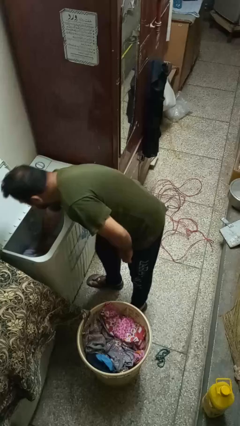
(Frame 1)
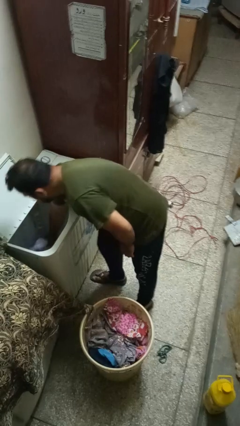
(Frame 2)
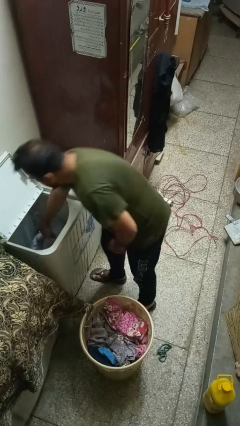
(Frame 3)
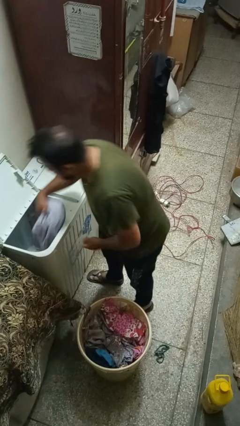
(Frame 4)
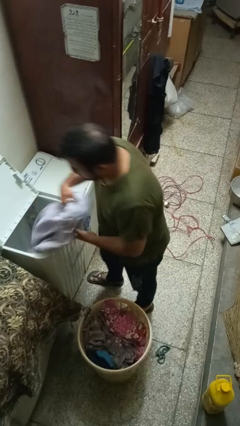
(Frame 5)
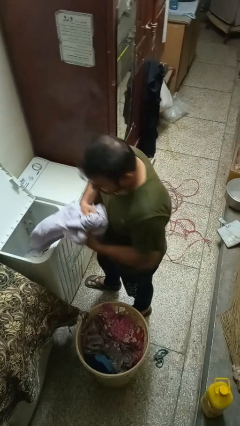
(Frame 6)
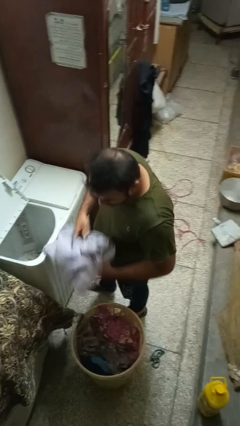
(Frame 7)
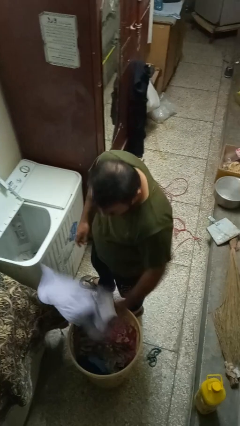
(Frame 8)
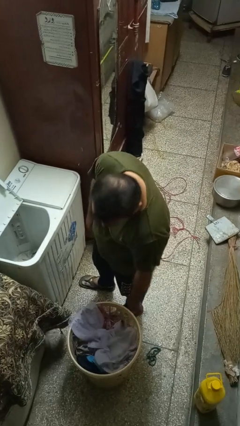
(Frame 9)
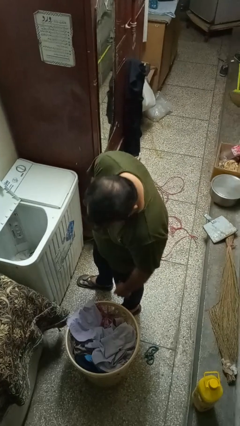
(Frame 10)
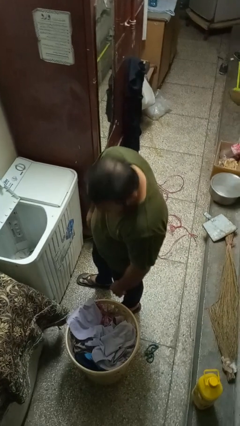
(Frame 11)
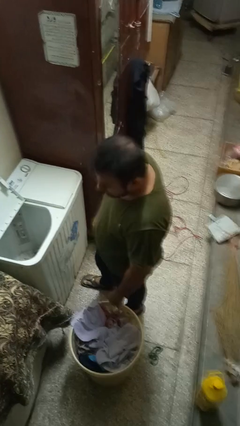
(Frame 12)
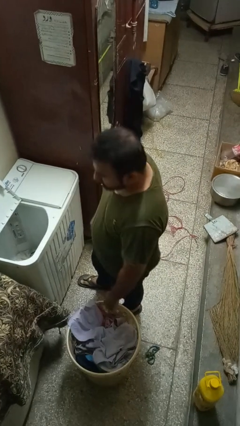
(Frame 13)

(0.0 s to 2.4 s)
person unloads clotheswasher

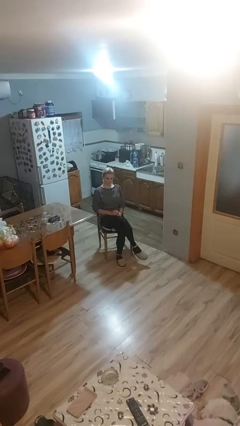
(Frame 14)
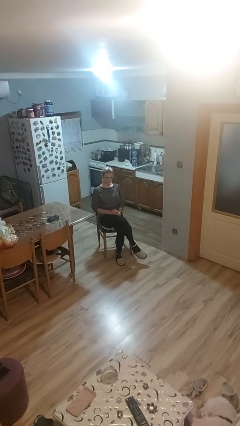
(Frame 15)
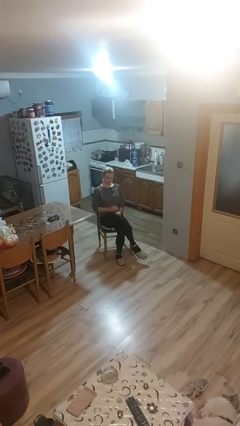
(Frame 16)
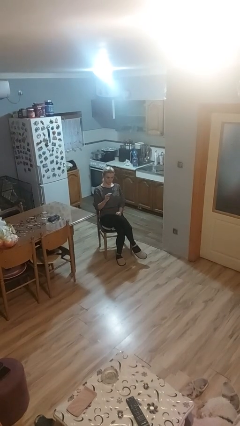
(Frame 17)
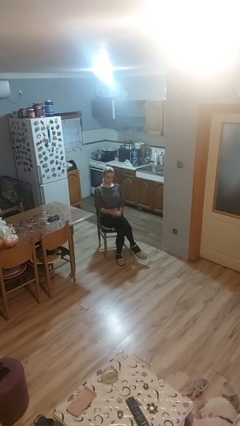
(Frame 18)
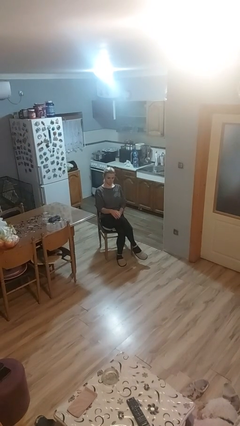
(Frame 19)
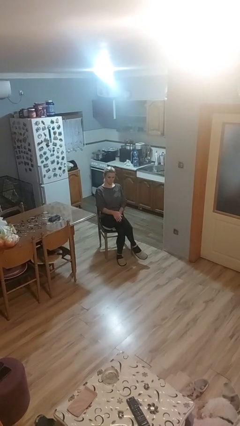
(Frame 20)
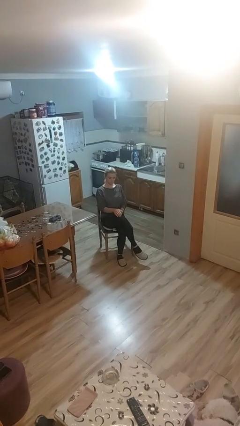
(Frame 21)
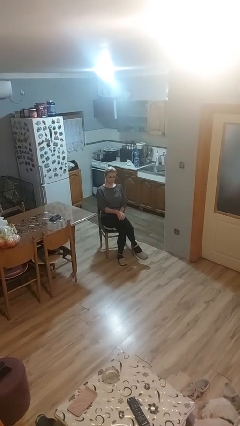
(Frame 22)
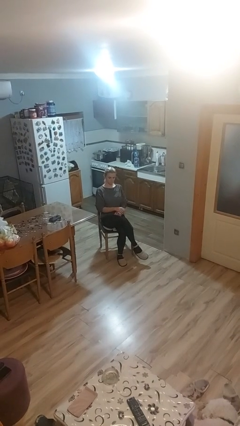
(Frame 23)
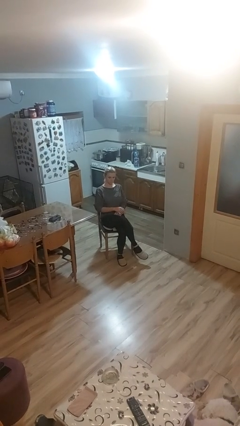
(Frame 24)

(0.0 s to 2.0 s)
person slaps hands on thighs

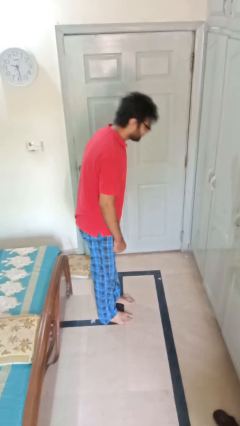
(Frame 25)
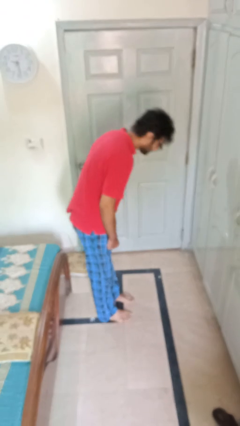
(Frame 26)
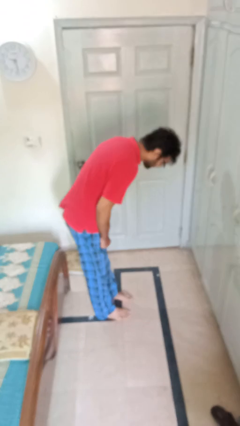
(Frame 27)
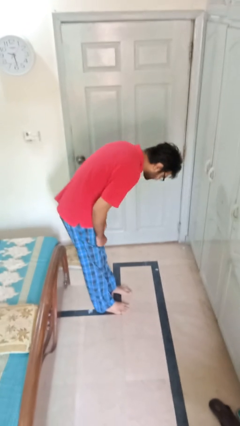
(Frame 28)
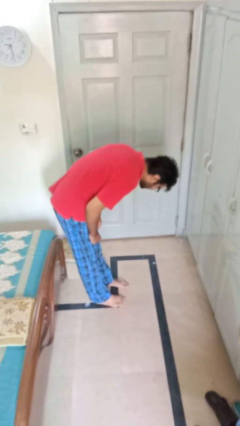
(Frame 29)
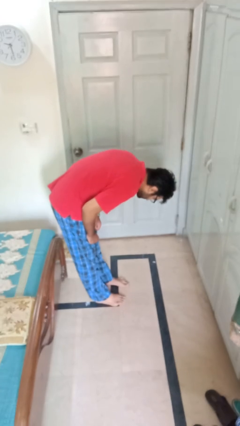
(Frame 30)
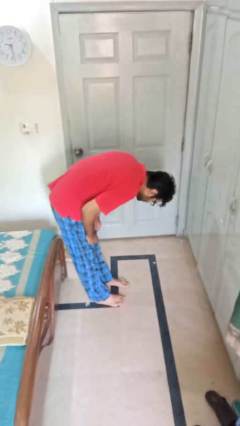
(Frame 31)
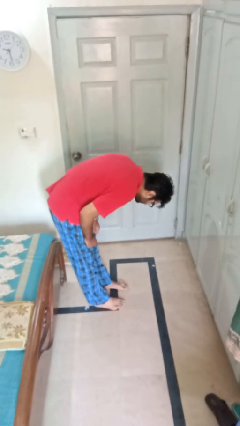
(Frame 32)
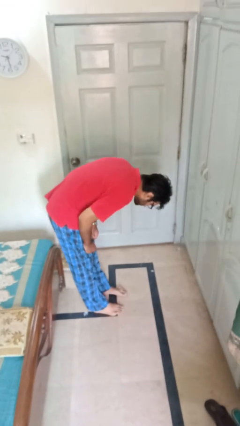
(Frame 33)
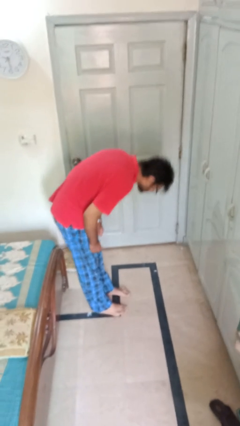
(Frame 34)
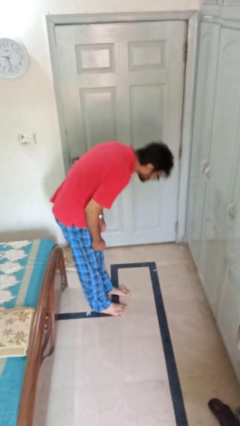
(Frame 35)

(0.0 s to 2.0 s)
person bows

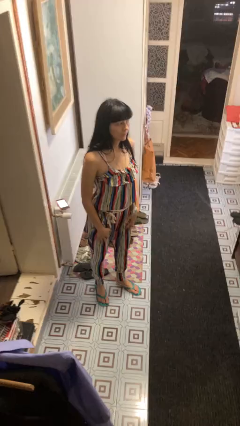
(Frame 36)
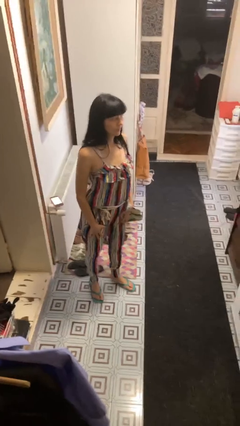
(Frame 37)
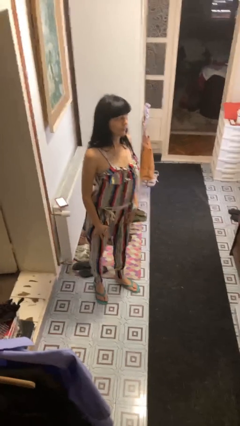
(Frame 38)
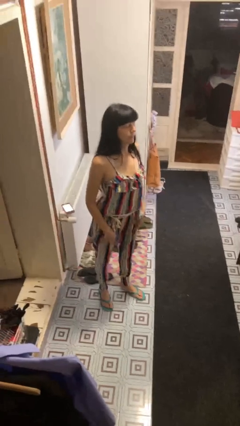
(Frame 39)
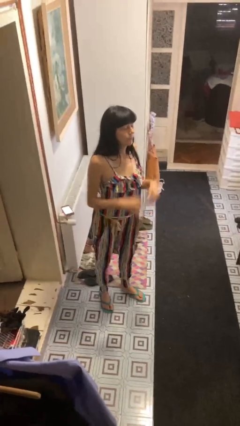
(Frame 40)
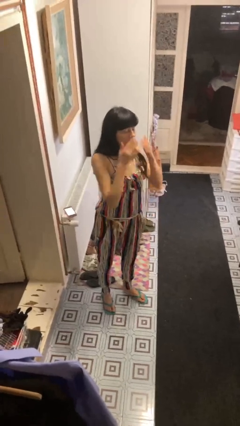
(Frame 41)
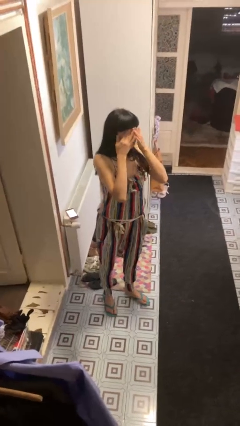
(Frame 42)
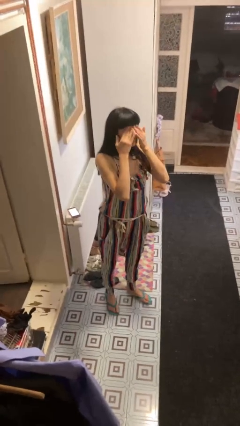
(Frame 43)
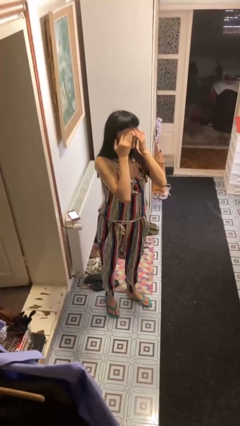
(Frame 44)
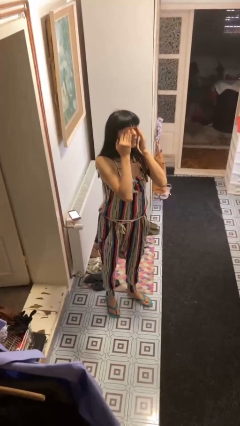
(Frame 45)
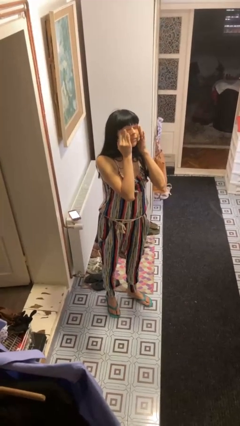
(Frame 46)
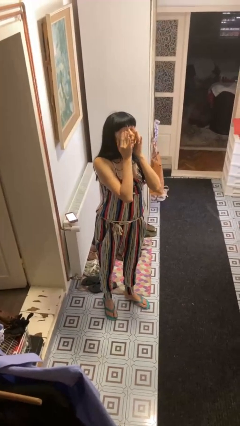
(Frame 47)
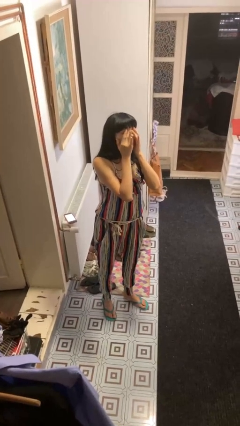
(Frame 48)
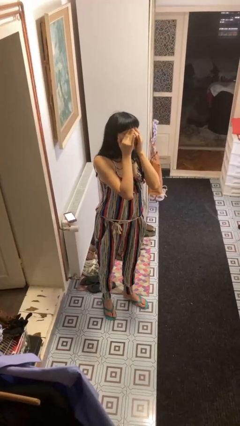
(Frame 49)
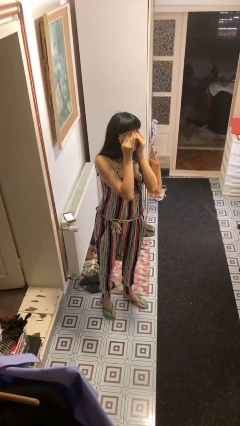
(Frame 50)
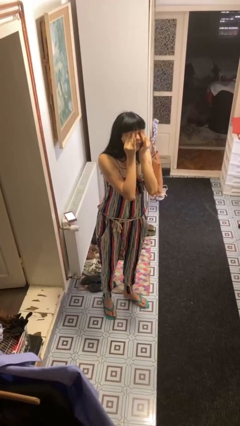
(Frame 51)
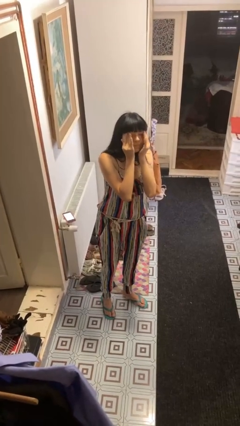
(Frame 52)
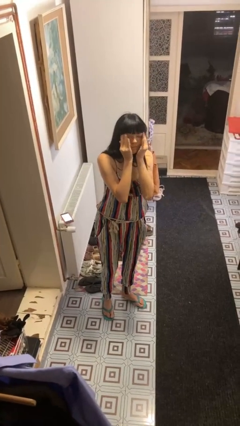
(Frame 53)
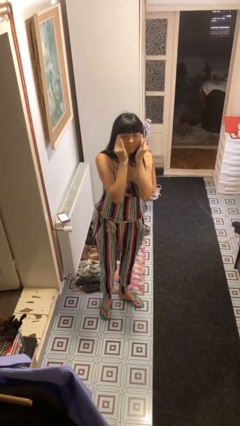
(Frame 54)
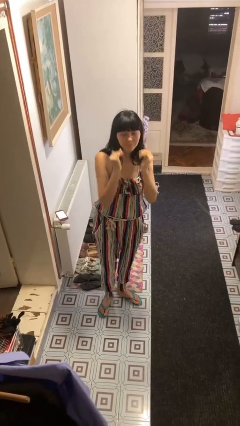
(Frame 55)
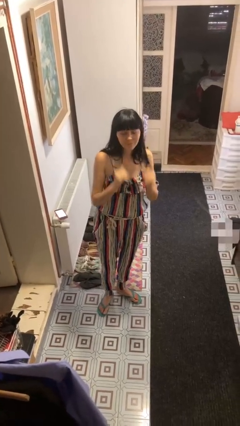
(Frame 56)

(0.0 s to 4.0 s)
person rubs eyes

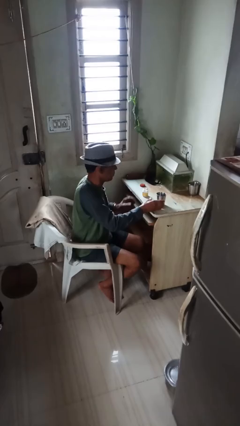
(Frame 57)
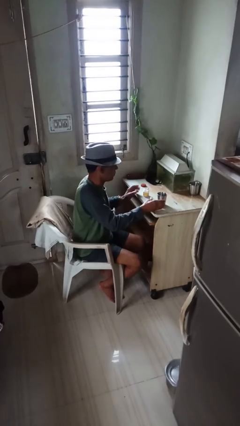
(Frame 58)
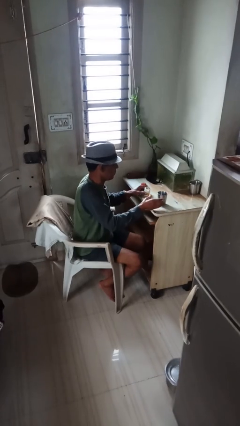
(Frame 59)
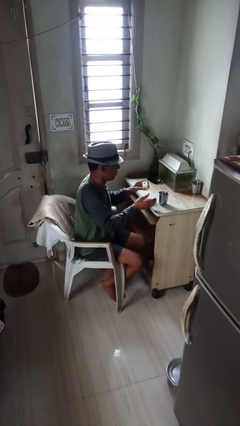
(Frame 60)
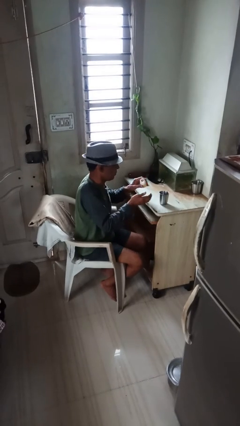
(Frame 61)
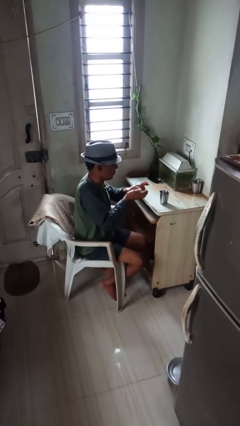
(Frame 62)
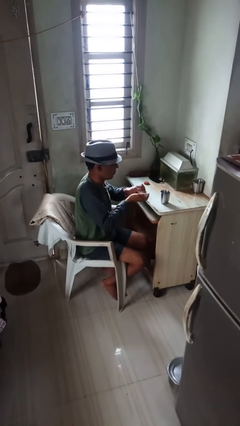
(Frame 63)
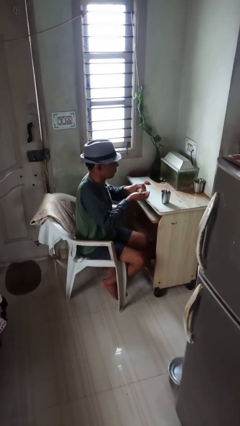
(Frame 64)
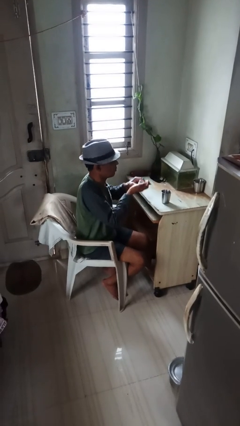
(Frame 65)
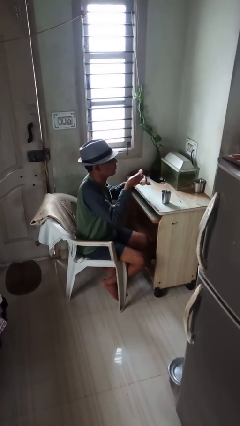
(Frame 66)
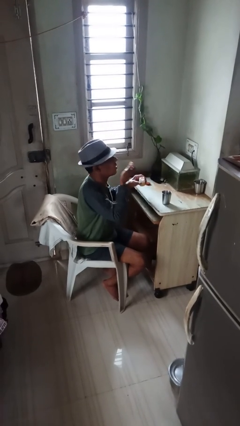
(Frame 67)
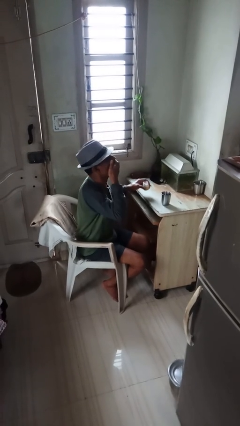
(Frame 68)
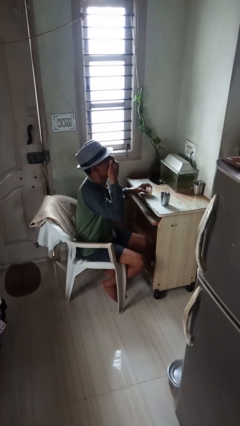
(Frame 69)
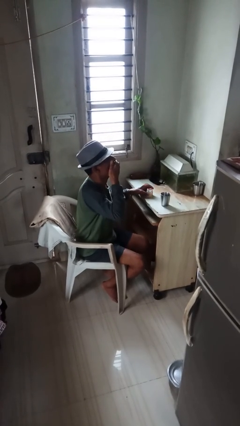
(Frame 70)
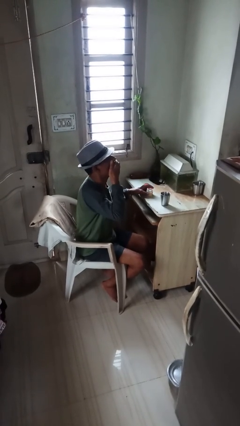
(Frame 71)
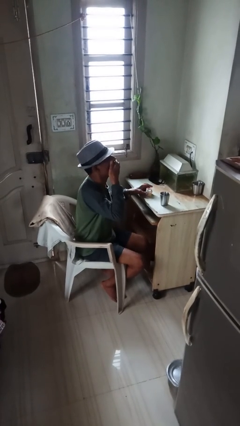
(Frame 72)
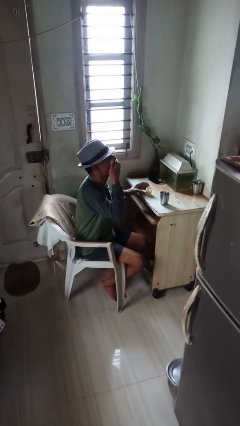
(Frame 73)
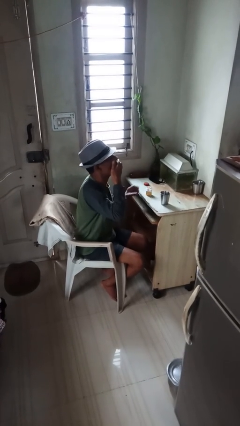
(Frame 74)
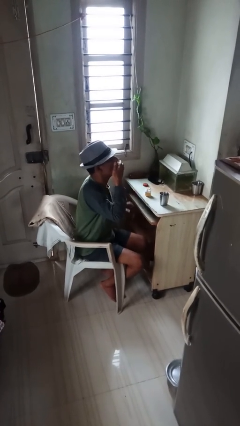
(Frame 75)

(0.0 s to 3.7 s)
person takes medicine pills

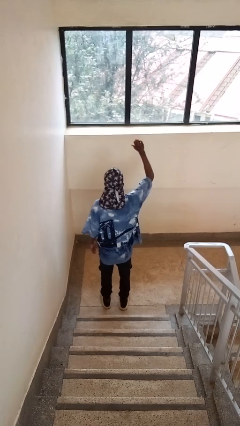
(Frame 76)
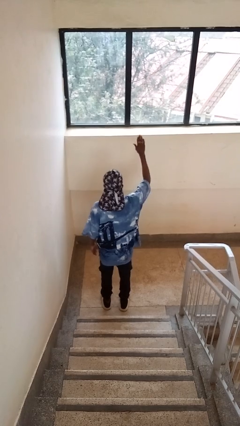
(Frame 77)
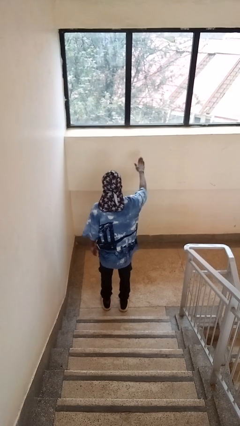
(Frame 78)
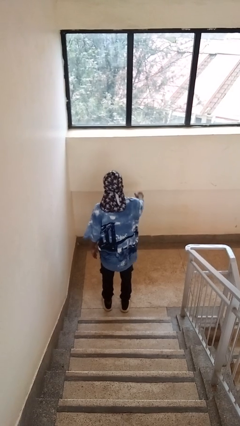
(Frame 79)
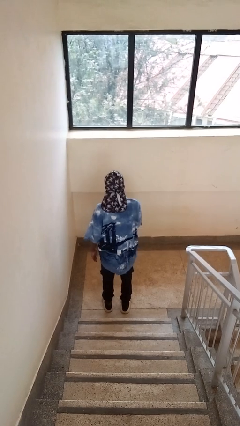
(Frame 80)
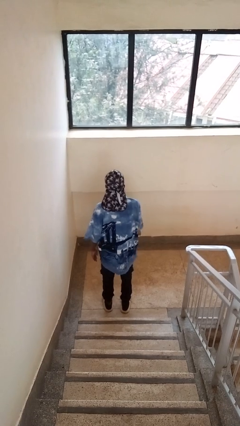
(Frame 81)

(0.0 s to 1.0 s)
person gestures swipe down

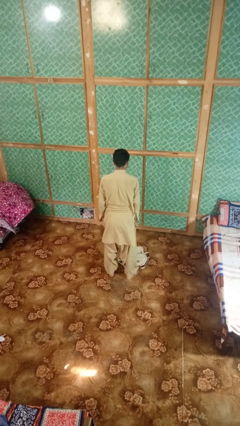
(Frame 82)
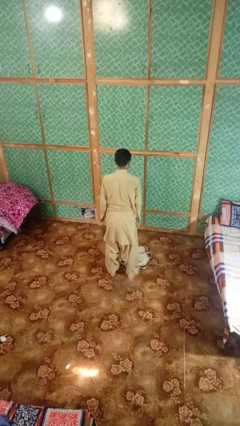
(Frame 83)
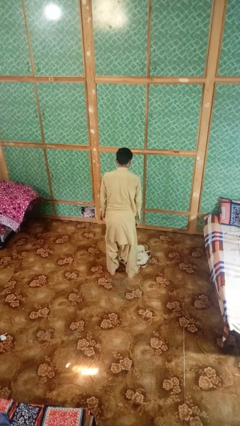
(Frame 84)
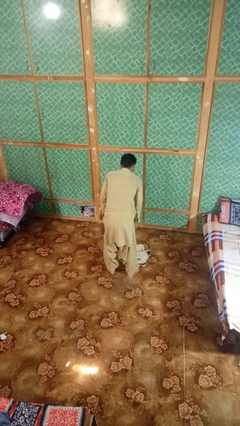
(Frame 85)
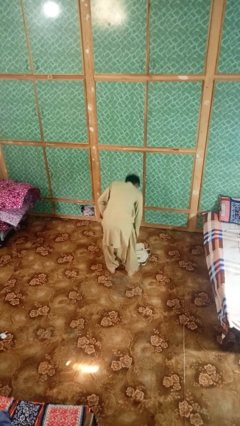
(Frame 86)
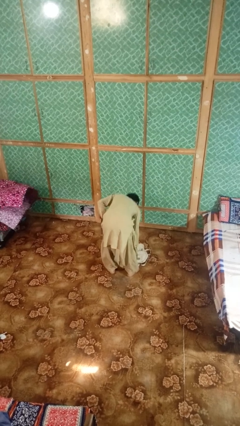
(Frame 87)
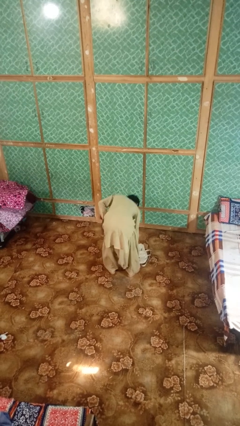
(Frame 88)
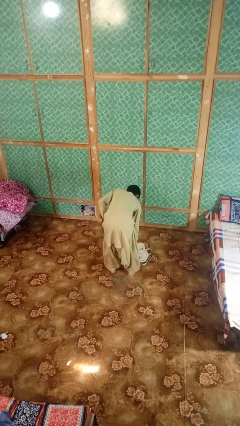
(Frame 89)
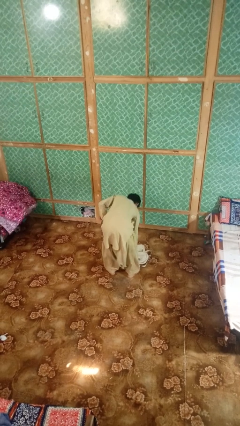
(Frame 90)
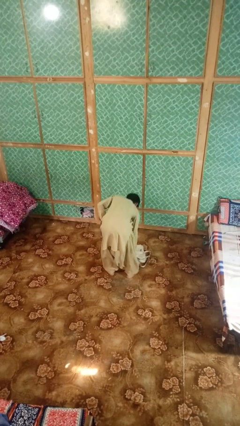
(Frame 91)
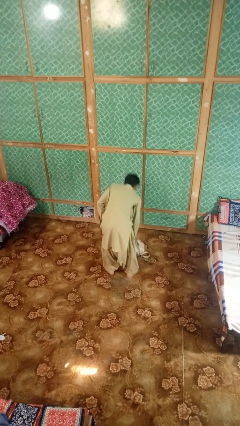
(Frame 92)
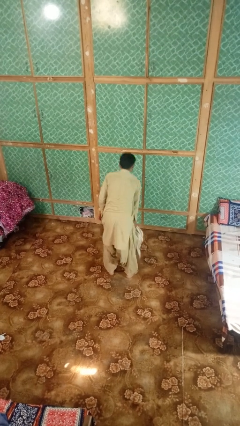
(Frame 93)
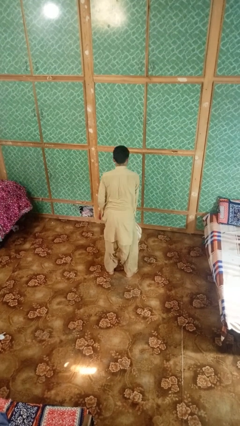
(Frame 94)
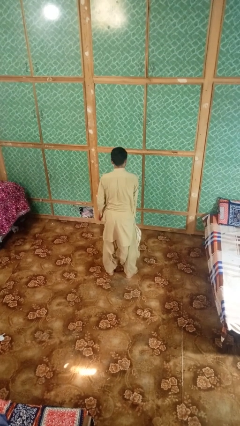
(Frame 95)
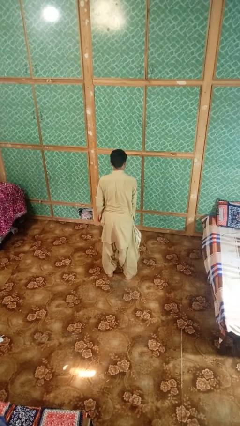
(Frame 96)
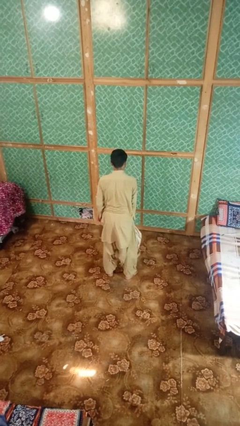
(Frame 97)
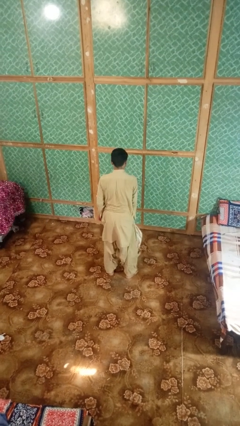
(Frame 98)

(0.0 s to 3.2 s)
person picks up object from floor
